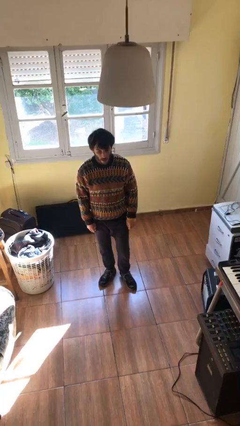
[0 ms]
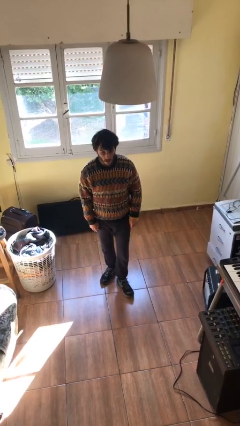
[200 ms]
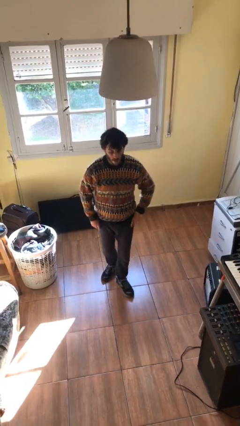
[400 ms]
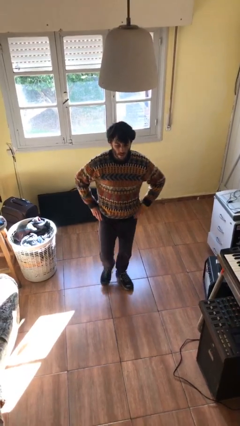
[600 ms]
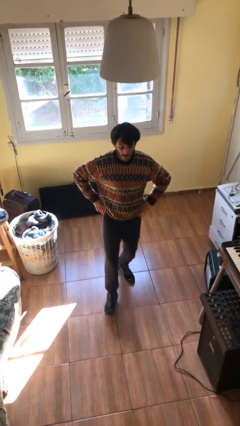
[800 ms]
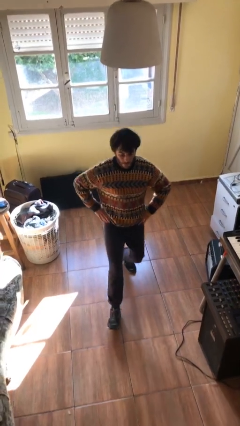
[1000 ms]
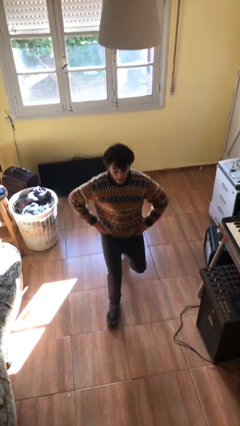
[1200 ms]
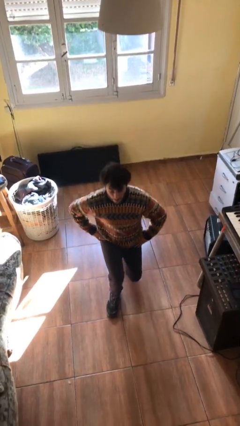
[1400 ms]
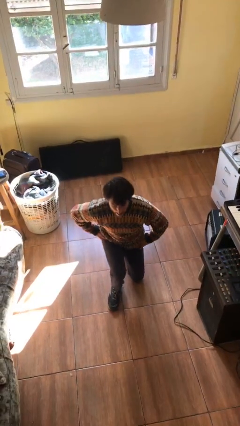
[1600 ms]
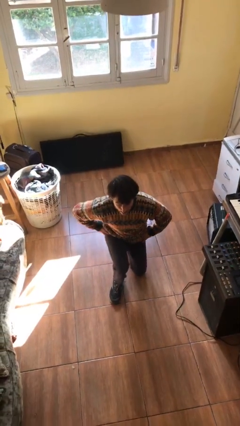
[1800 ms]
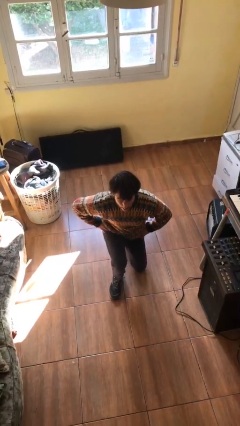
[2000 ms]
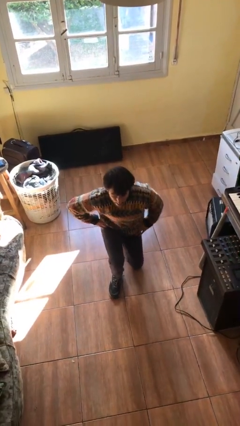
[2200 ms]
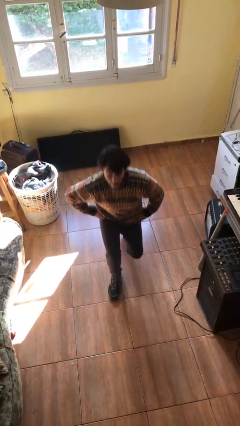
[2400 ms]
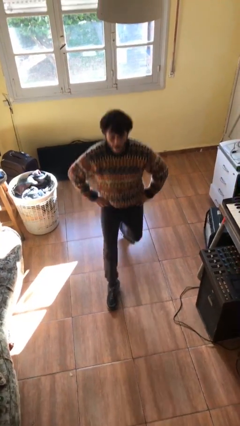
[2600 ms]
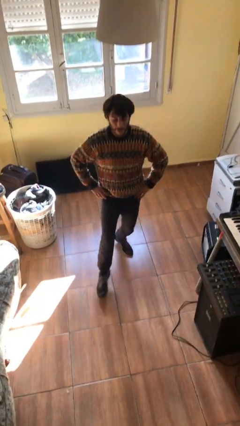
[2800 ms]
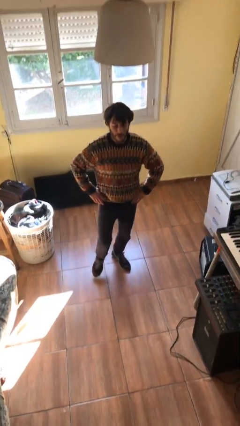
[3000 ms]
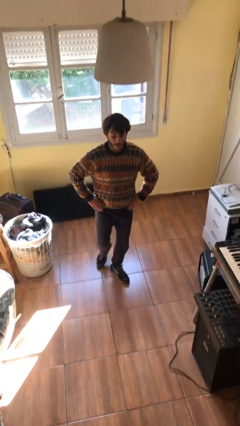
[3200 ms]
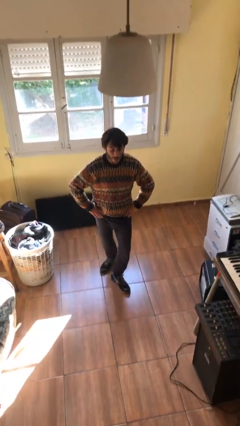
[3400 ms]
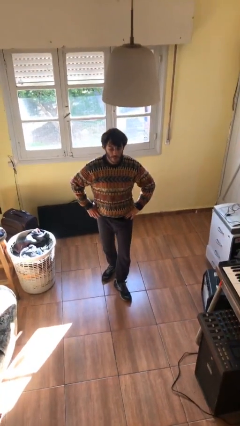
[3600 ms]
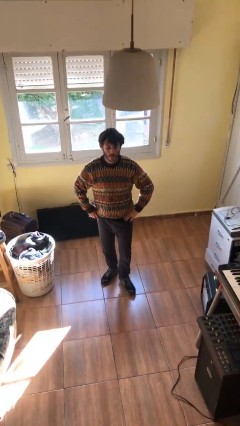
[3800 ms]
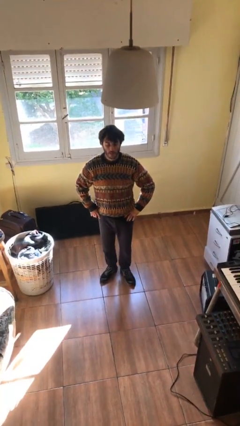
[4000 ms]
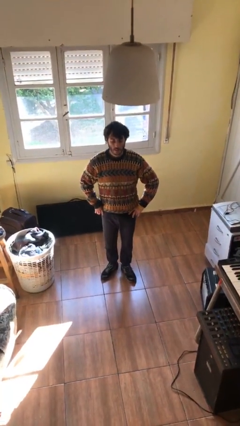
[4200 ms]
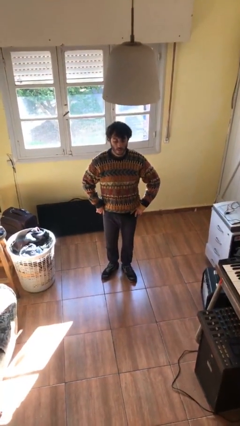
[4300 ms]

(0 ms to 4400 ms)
person exercises with lunges

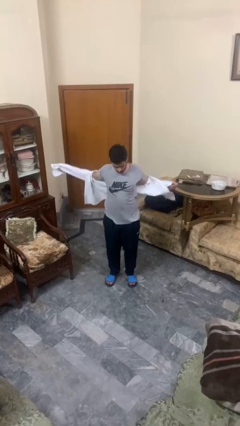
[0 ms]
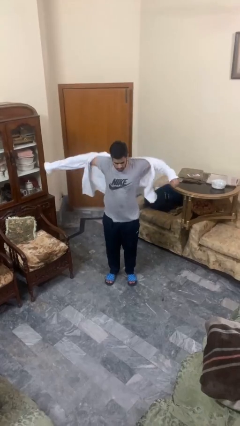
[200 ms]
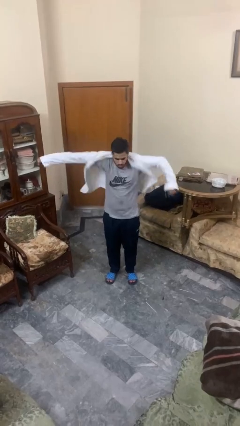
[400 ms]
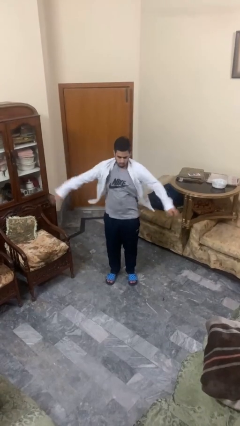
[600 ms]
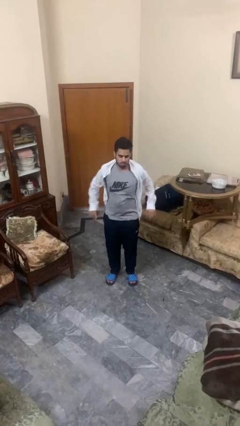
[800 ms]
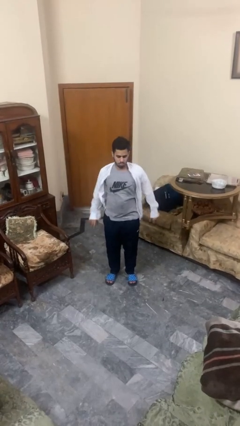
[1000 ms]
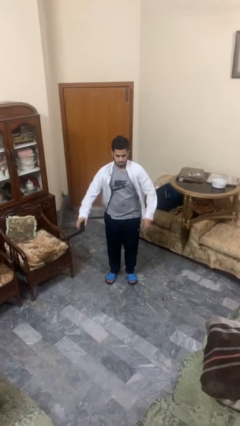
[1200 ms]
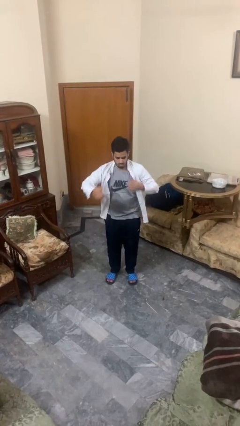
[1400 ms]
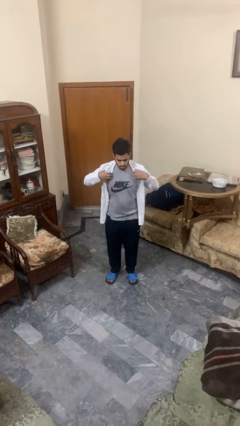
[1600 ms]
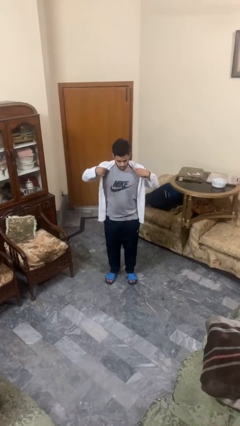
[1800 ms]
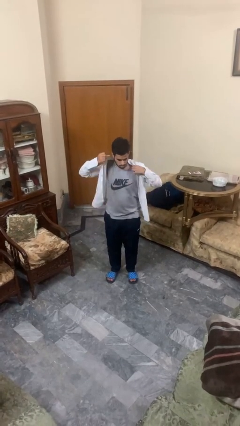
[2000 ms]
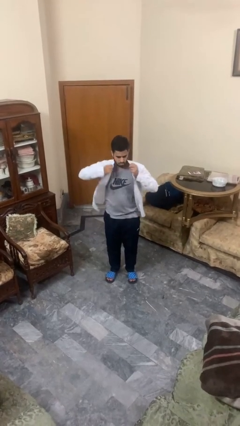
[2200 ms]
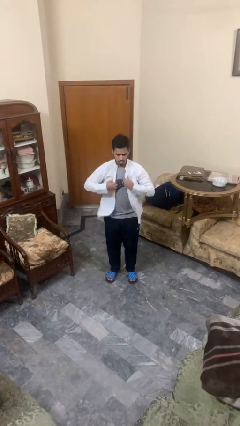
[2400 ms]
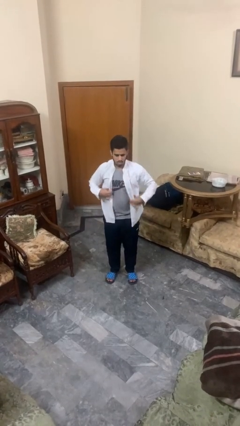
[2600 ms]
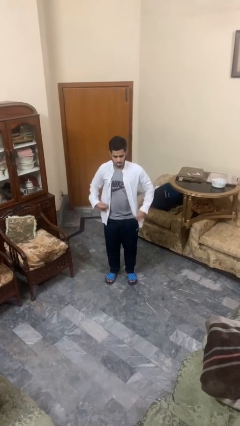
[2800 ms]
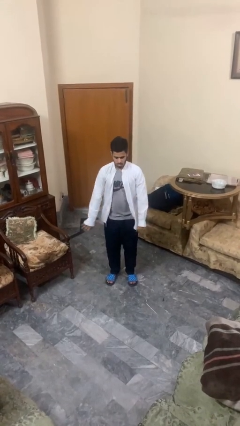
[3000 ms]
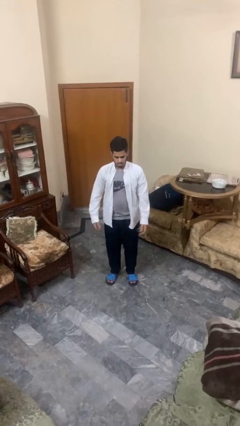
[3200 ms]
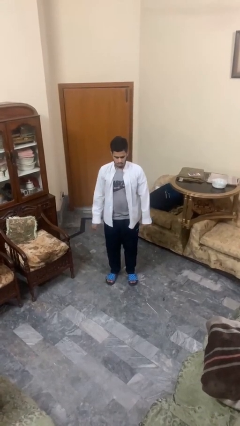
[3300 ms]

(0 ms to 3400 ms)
person puts on shirt

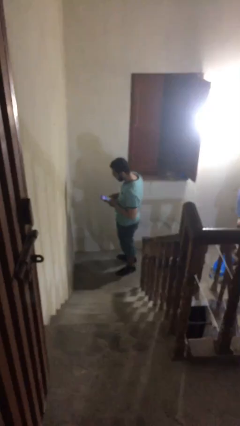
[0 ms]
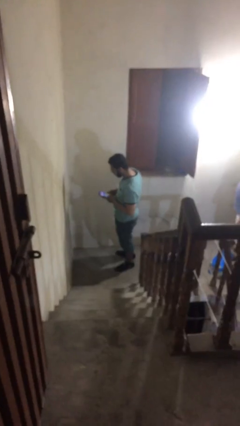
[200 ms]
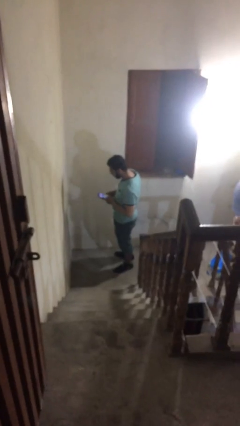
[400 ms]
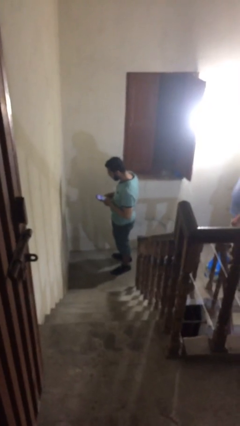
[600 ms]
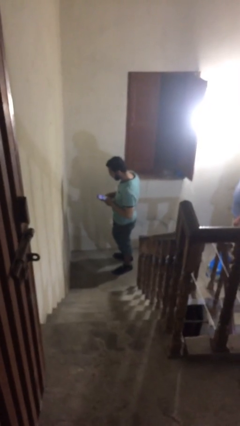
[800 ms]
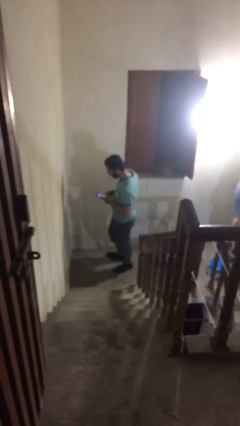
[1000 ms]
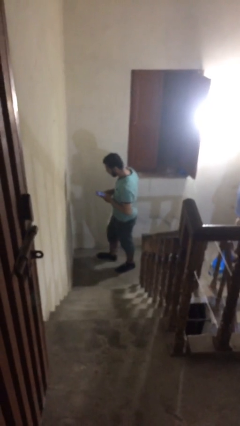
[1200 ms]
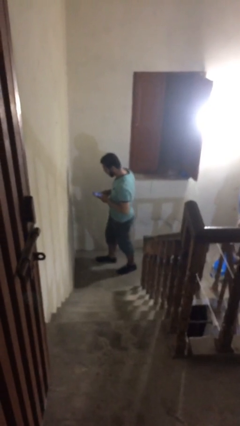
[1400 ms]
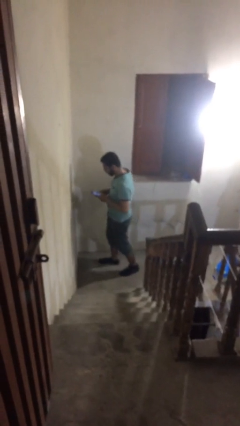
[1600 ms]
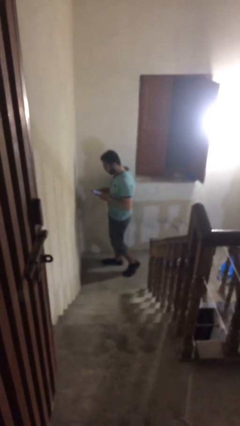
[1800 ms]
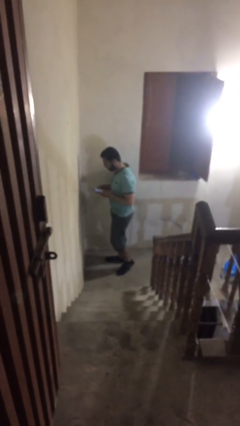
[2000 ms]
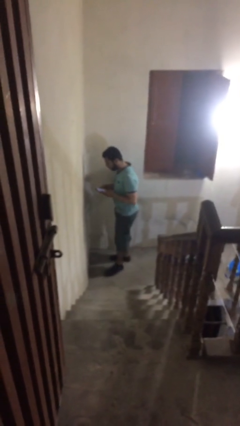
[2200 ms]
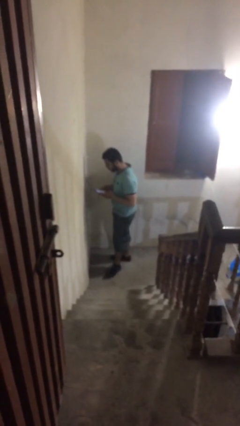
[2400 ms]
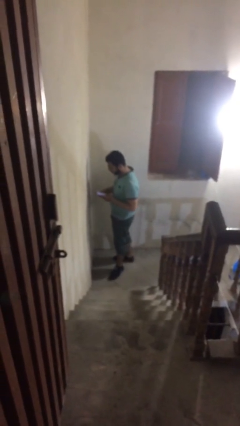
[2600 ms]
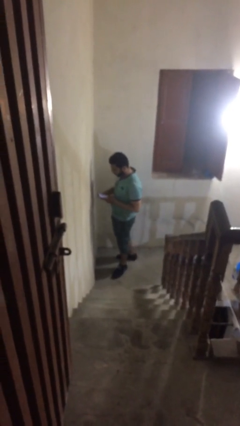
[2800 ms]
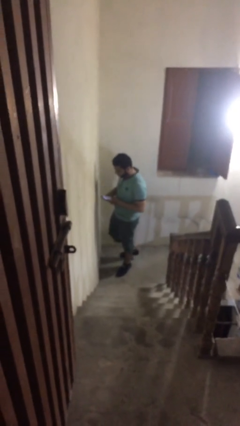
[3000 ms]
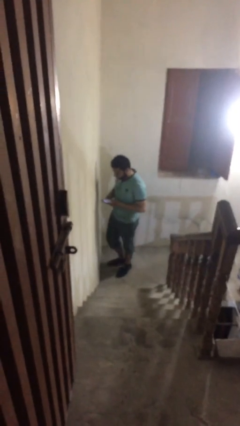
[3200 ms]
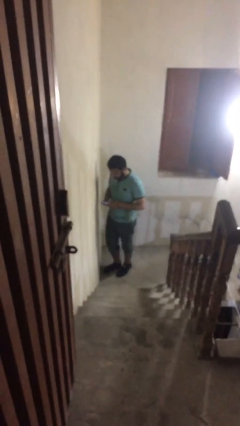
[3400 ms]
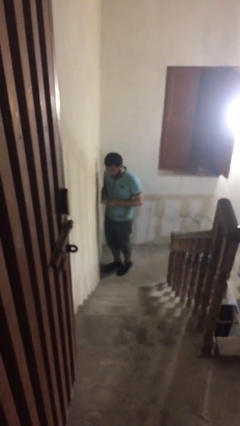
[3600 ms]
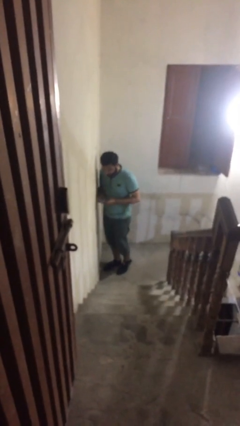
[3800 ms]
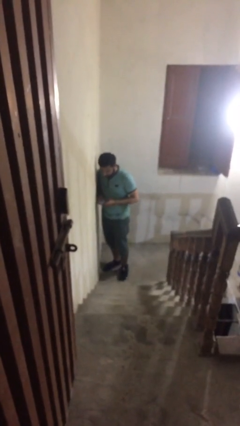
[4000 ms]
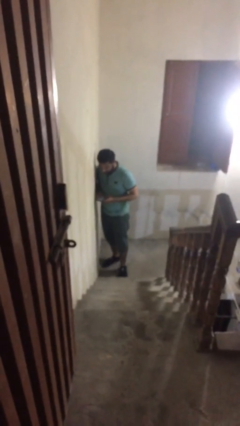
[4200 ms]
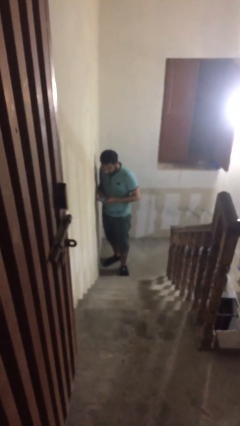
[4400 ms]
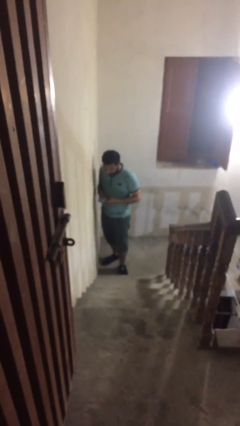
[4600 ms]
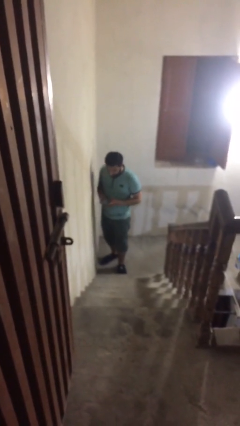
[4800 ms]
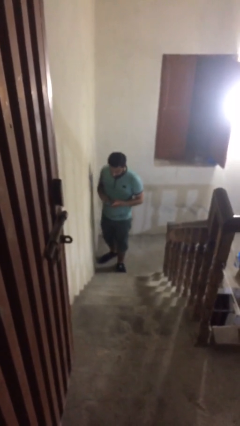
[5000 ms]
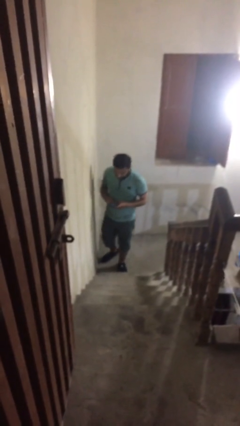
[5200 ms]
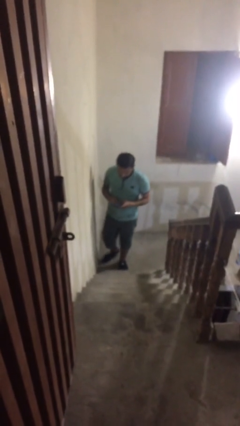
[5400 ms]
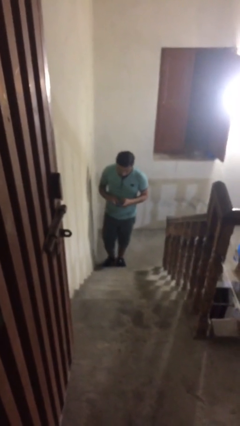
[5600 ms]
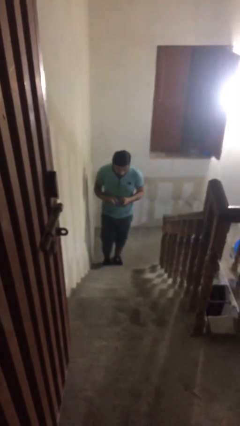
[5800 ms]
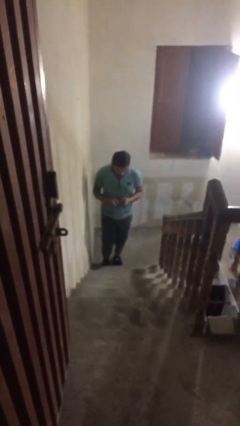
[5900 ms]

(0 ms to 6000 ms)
person texts on phone

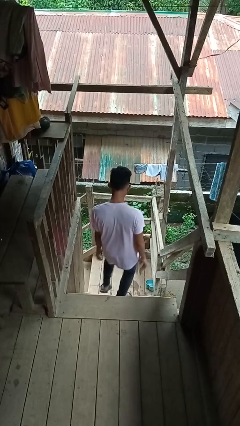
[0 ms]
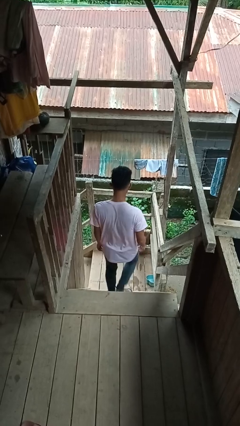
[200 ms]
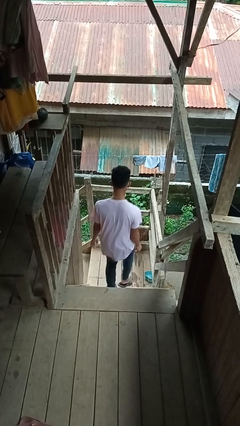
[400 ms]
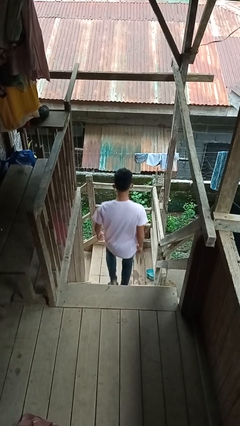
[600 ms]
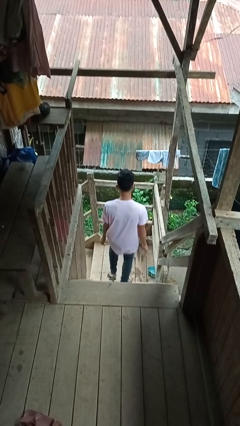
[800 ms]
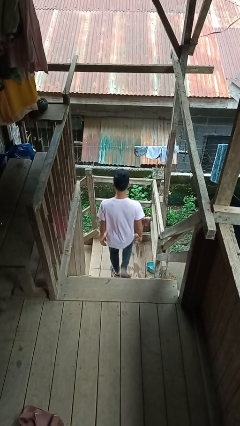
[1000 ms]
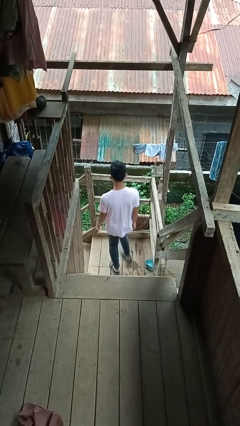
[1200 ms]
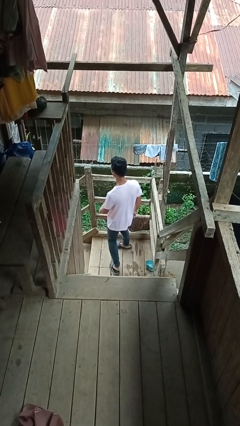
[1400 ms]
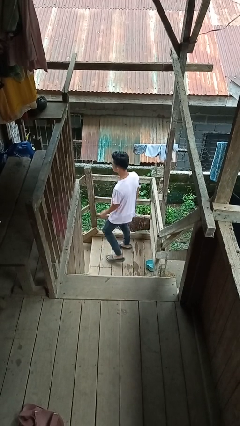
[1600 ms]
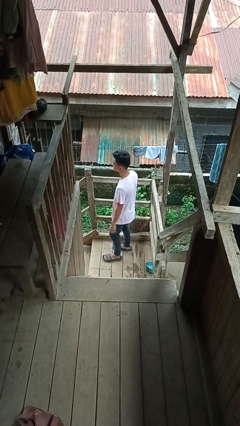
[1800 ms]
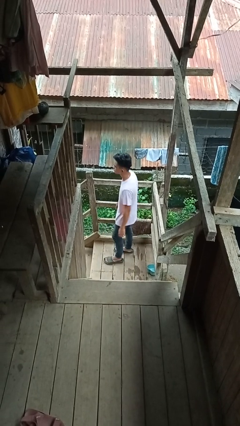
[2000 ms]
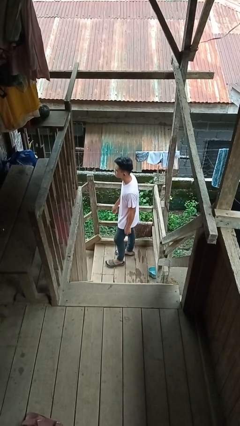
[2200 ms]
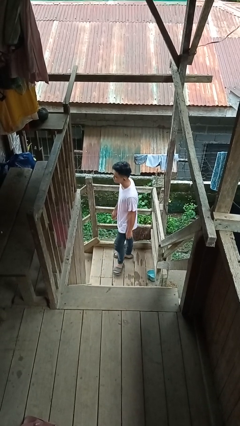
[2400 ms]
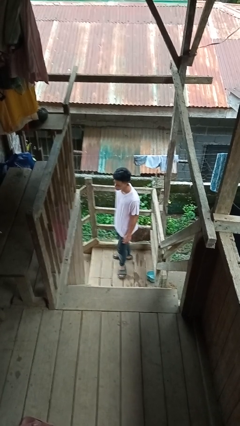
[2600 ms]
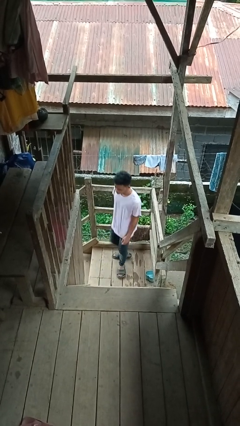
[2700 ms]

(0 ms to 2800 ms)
person climbs down stairs

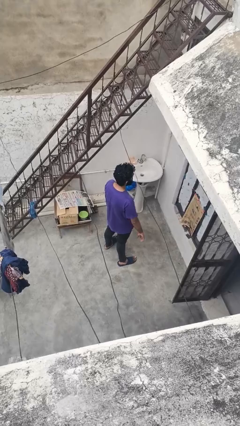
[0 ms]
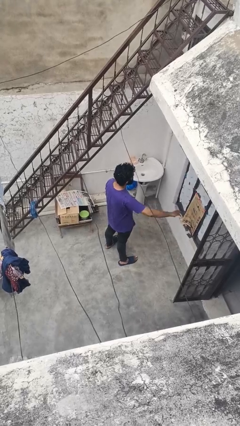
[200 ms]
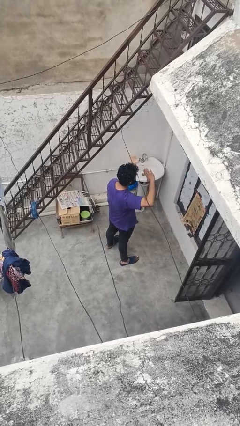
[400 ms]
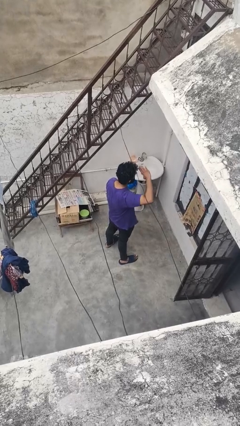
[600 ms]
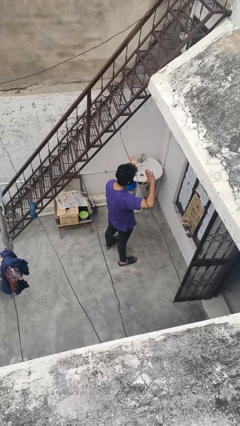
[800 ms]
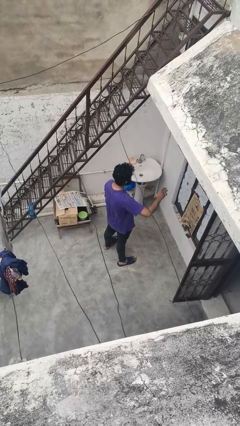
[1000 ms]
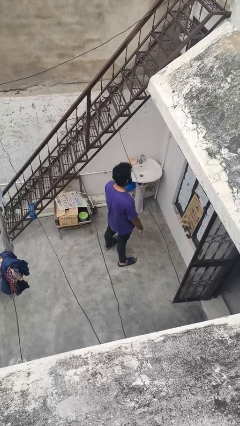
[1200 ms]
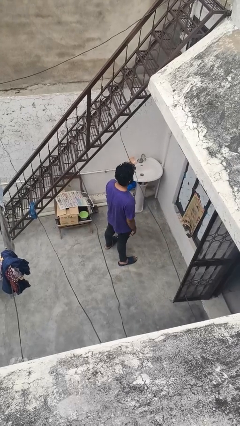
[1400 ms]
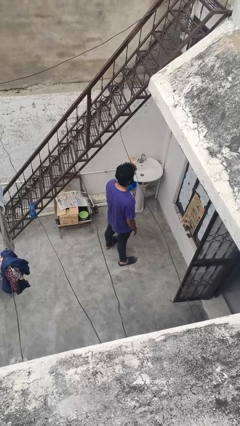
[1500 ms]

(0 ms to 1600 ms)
person salutes
